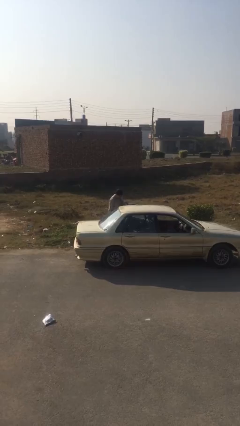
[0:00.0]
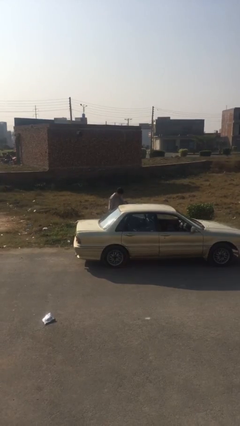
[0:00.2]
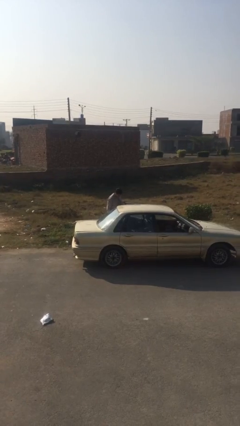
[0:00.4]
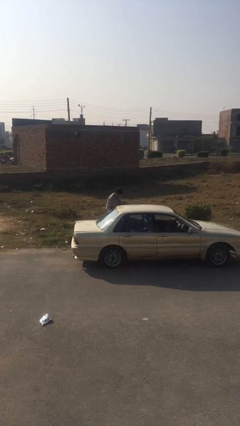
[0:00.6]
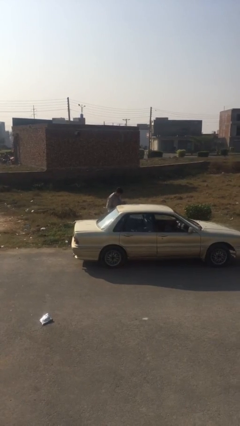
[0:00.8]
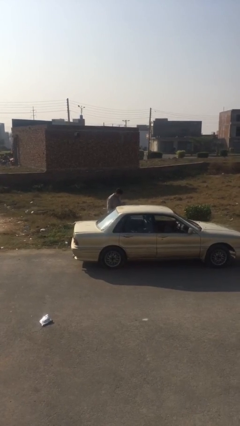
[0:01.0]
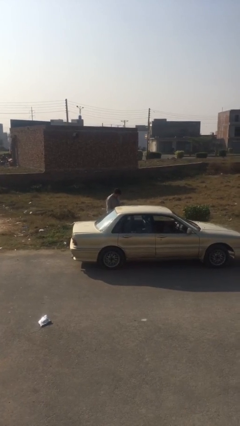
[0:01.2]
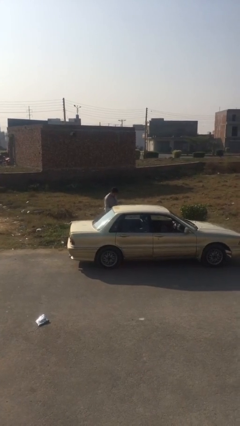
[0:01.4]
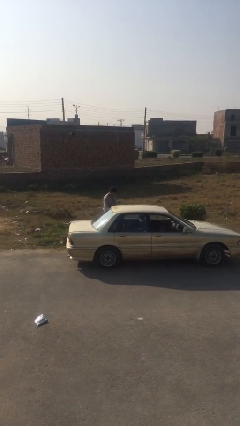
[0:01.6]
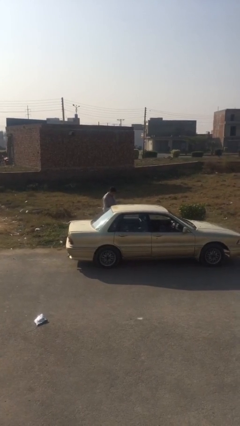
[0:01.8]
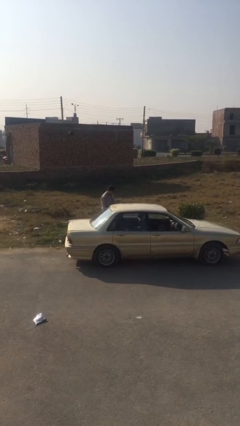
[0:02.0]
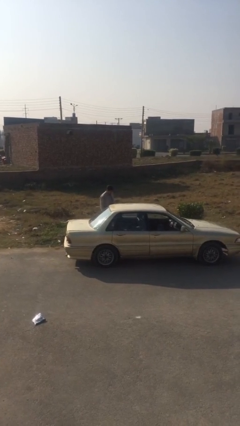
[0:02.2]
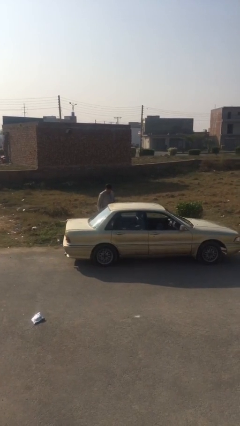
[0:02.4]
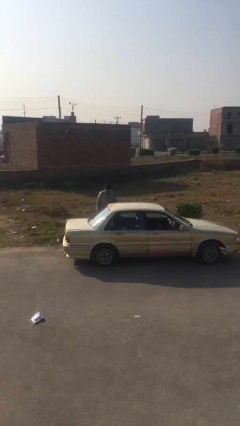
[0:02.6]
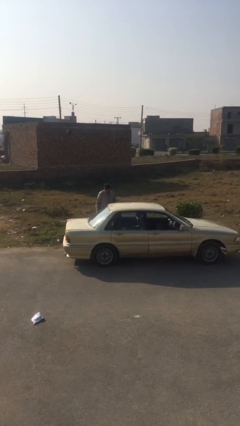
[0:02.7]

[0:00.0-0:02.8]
person closes car door

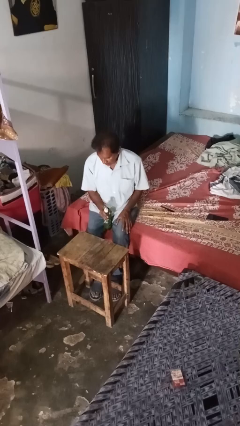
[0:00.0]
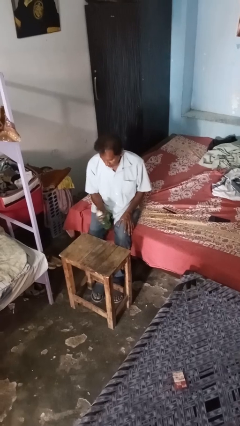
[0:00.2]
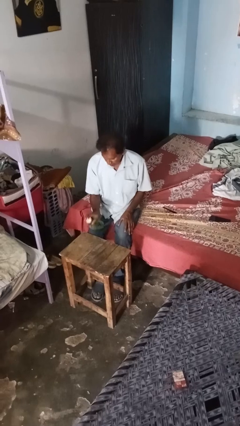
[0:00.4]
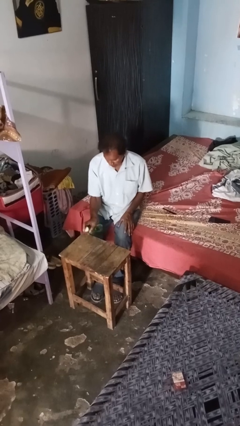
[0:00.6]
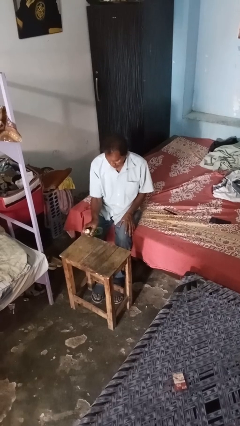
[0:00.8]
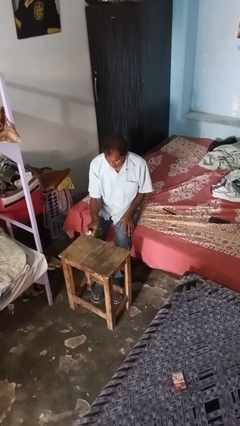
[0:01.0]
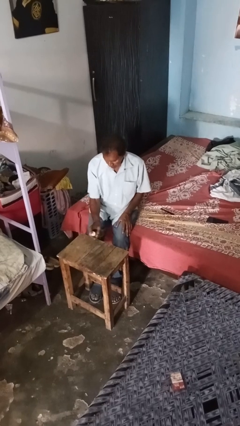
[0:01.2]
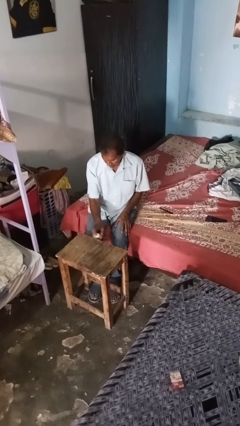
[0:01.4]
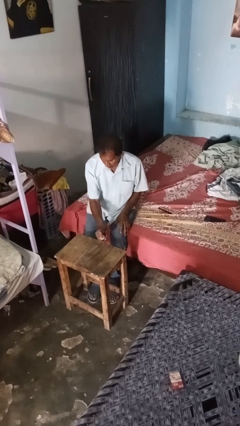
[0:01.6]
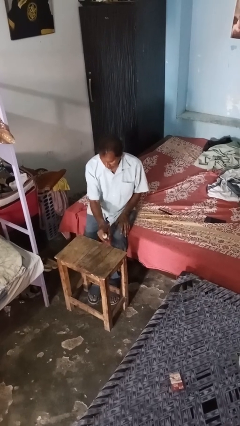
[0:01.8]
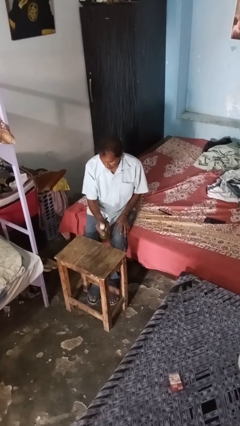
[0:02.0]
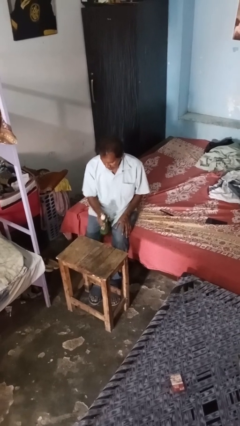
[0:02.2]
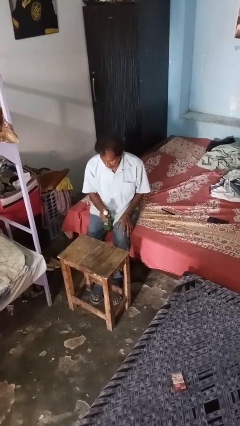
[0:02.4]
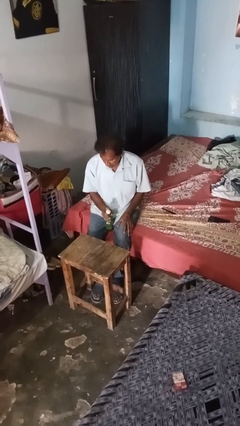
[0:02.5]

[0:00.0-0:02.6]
person sprays from bottle

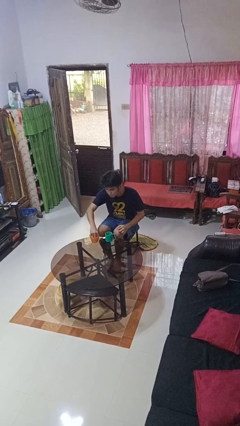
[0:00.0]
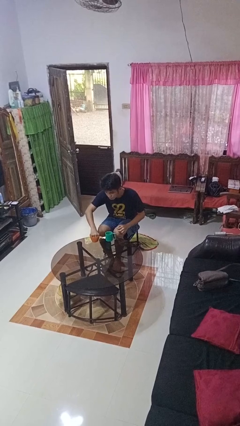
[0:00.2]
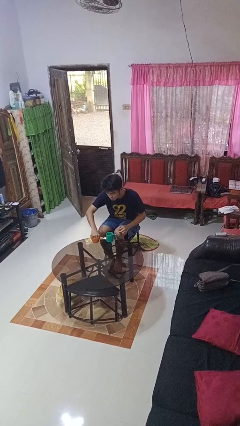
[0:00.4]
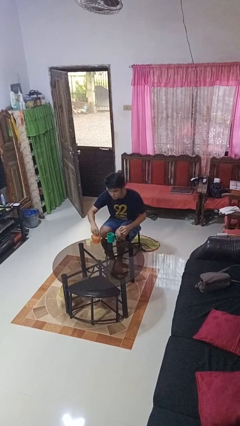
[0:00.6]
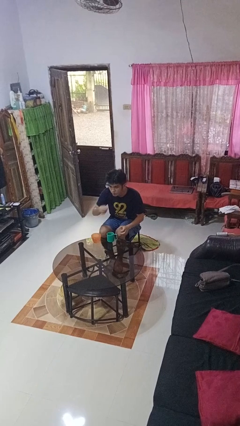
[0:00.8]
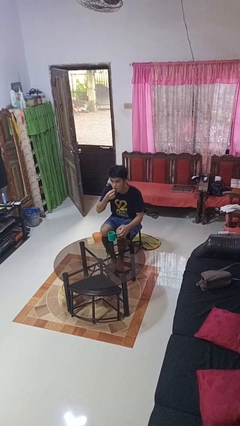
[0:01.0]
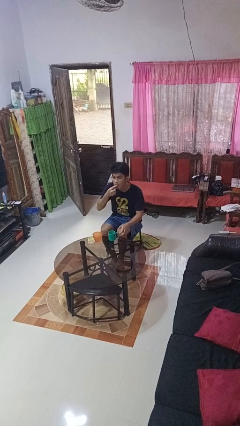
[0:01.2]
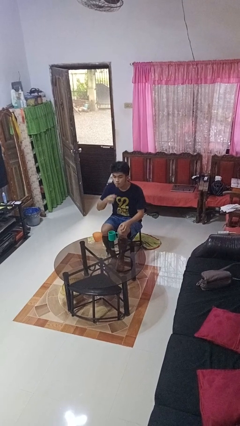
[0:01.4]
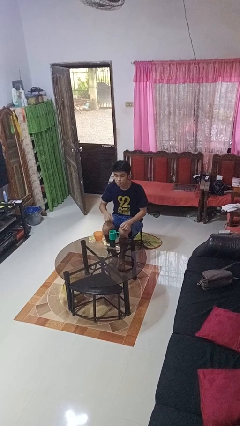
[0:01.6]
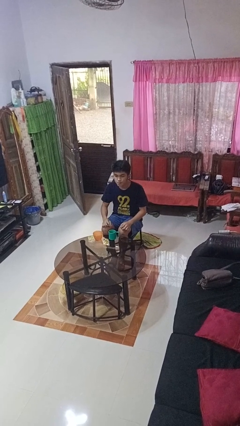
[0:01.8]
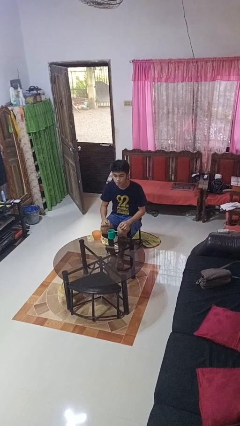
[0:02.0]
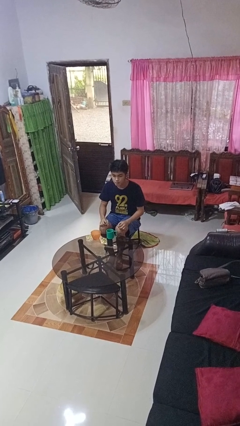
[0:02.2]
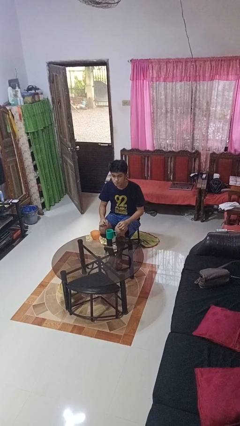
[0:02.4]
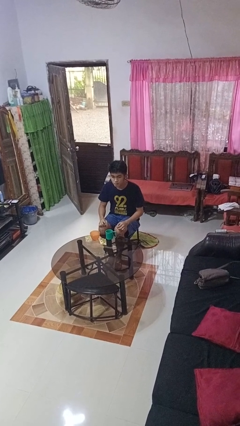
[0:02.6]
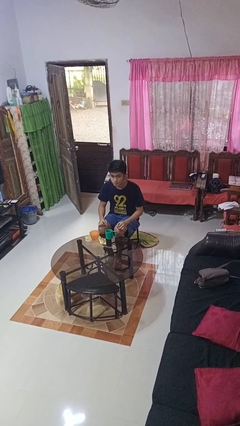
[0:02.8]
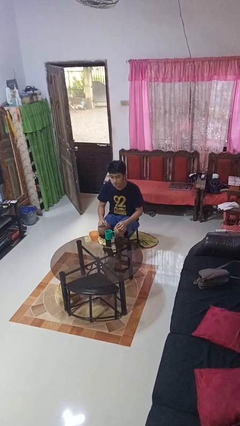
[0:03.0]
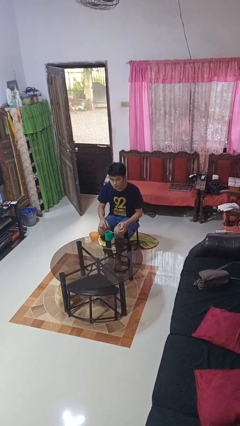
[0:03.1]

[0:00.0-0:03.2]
person takes medicine pills

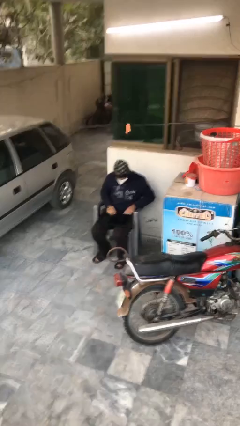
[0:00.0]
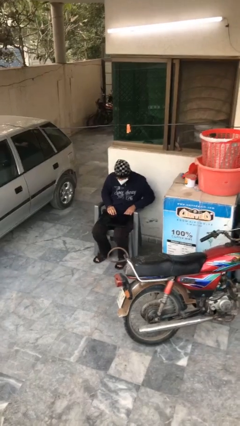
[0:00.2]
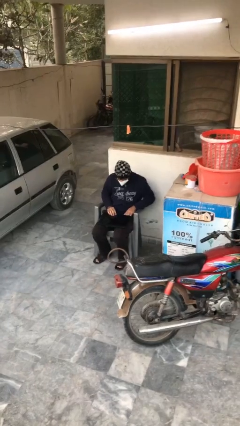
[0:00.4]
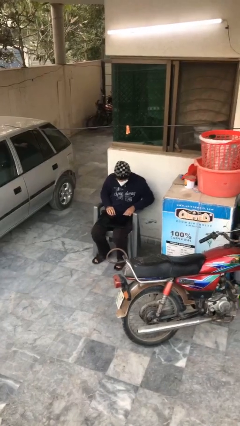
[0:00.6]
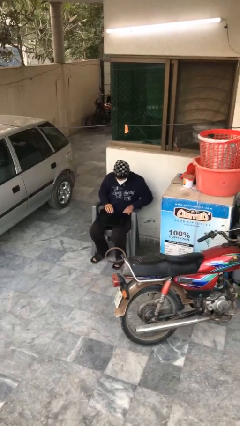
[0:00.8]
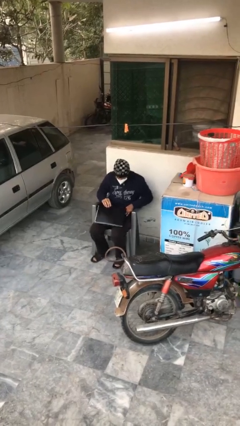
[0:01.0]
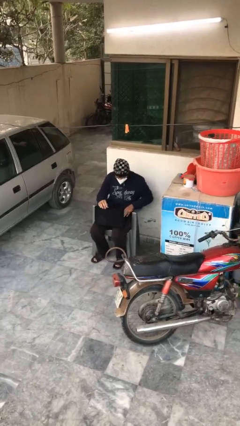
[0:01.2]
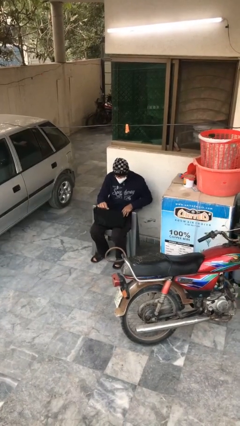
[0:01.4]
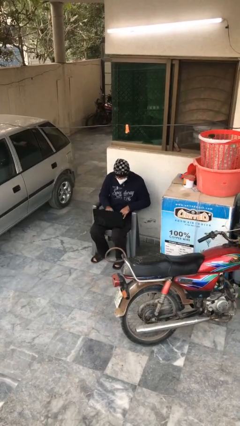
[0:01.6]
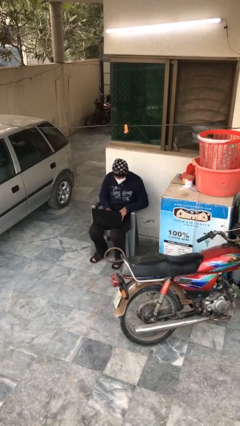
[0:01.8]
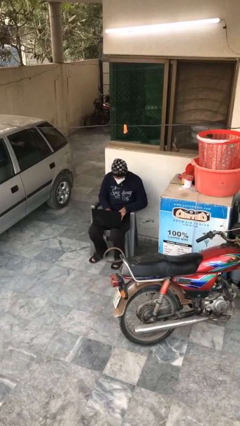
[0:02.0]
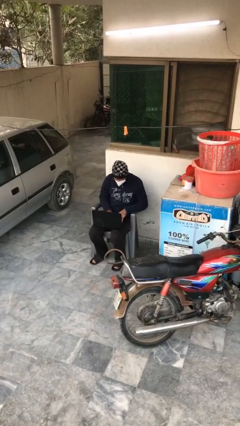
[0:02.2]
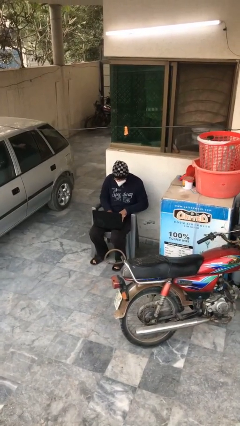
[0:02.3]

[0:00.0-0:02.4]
person interacts with laptop

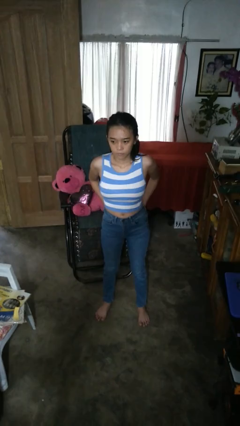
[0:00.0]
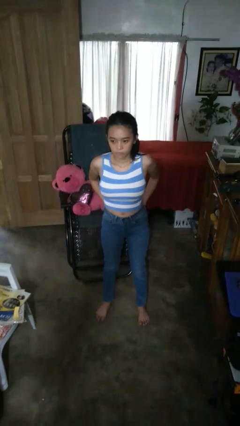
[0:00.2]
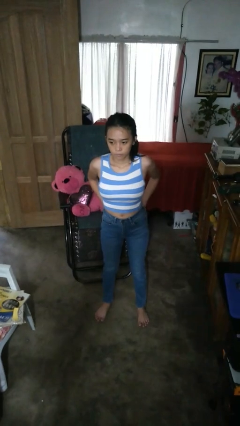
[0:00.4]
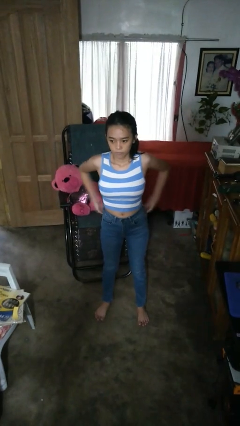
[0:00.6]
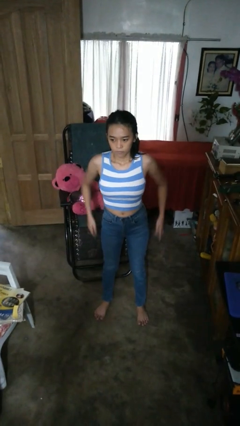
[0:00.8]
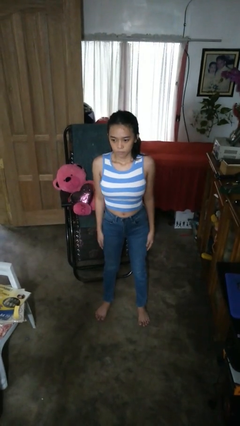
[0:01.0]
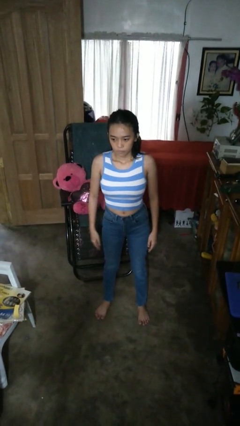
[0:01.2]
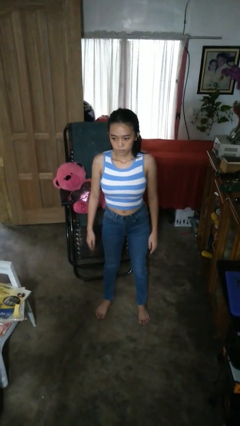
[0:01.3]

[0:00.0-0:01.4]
person puts hands in back pockets

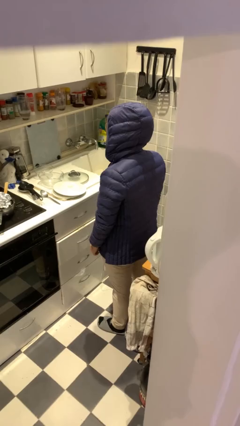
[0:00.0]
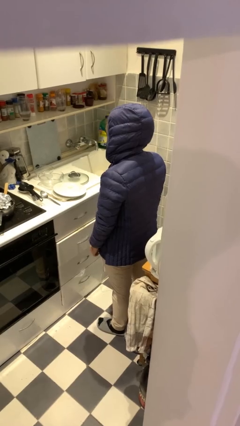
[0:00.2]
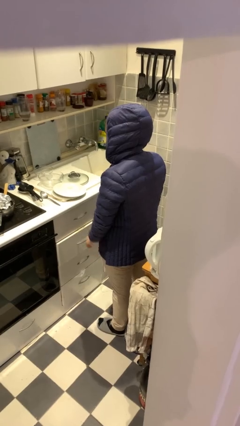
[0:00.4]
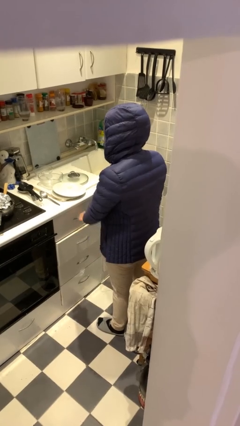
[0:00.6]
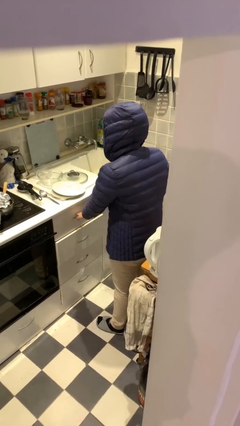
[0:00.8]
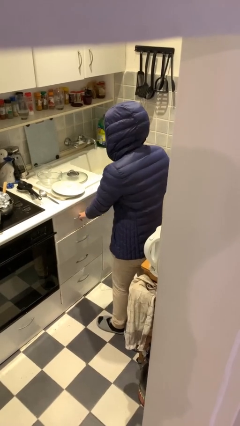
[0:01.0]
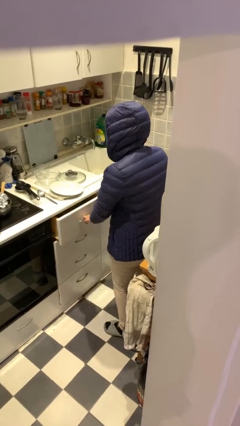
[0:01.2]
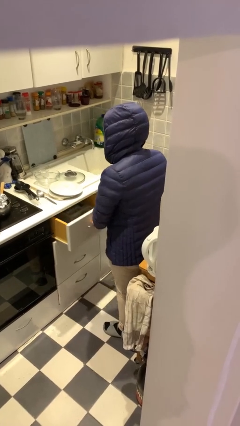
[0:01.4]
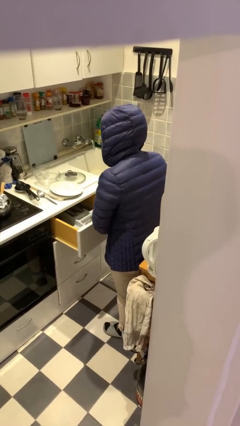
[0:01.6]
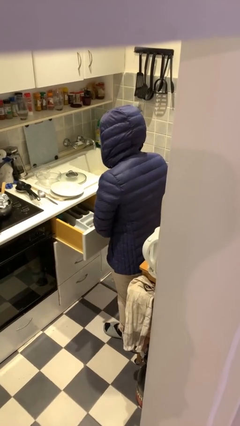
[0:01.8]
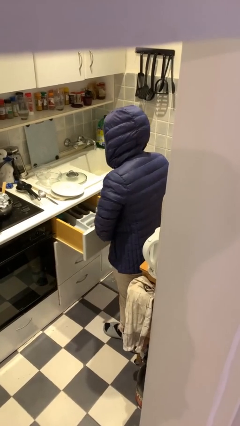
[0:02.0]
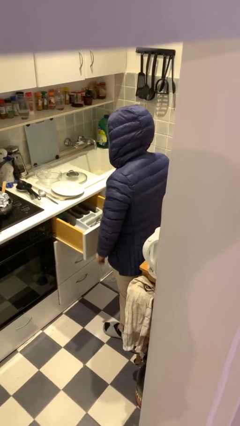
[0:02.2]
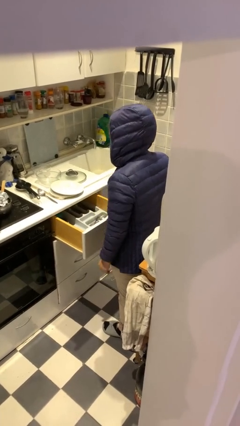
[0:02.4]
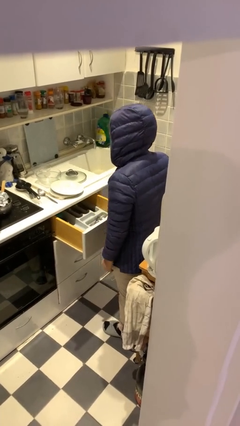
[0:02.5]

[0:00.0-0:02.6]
person opens kitchen drawer

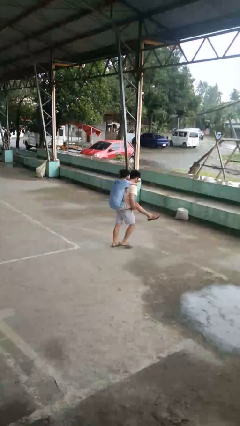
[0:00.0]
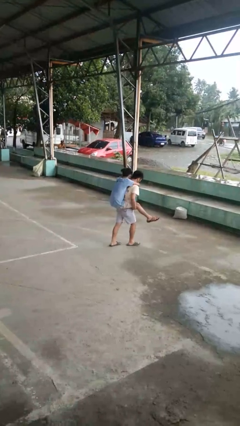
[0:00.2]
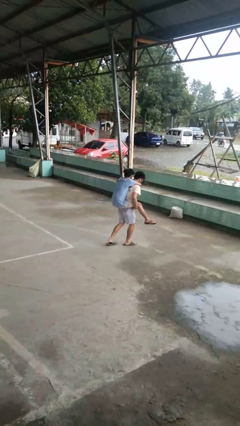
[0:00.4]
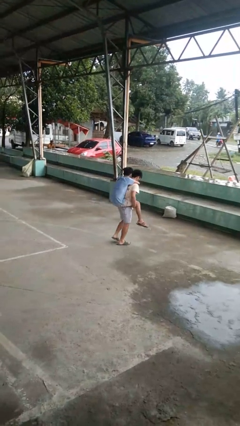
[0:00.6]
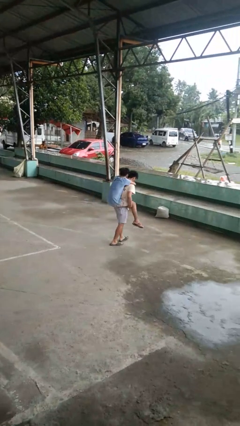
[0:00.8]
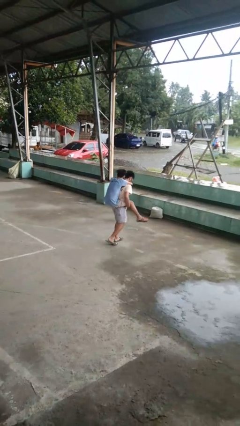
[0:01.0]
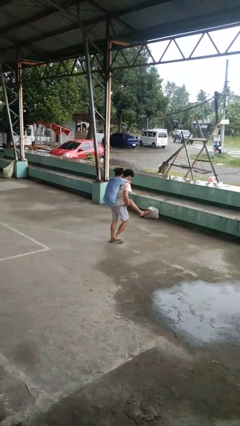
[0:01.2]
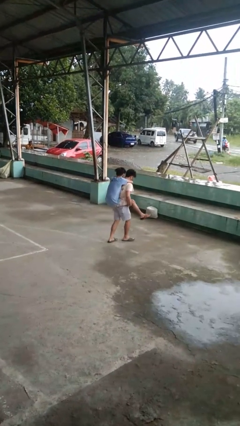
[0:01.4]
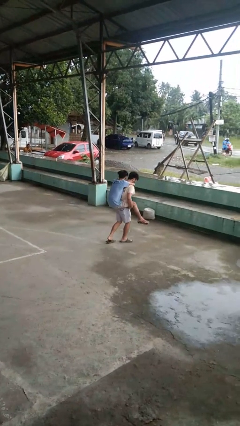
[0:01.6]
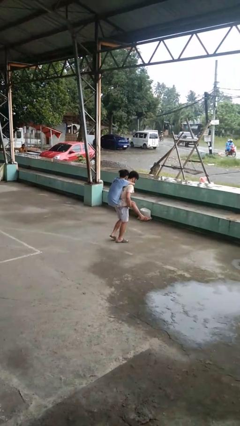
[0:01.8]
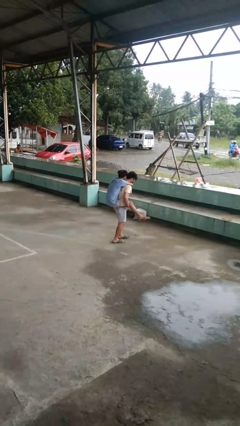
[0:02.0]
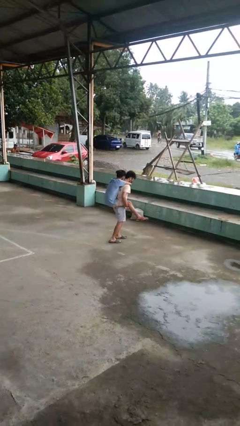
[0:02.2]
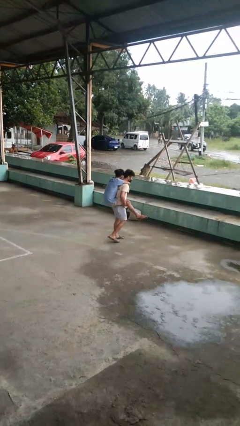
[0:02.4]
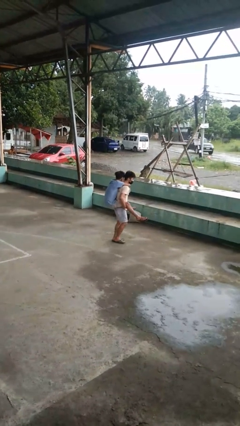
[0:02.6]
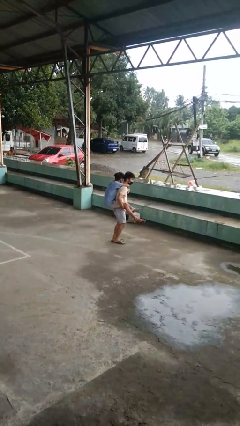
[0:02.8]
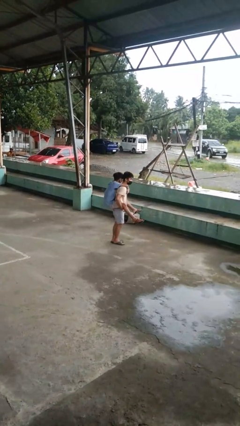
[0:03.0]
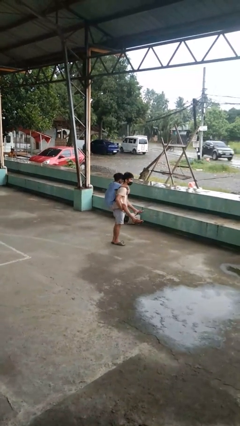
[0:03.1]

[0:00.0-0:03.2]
person carries person on back
